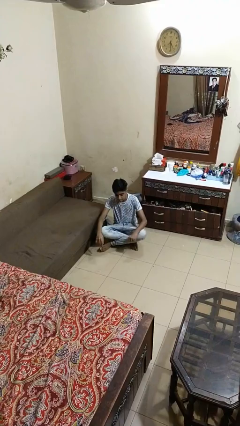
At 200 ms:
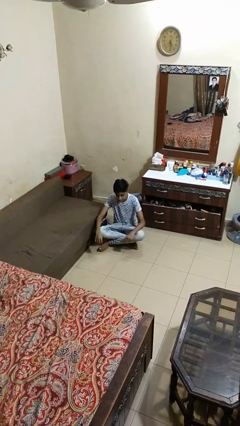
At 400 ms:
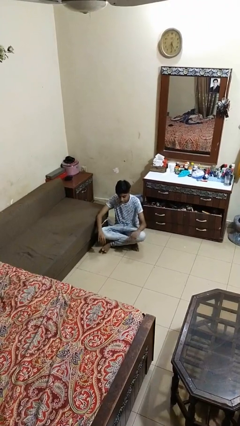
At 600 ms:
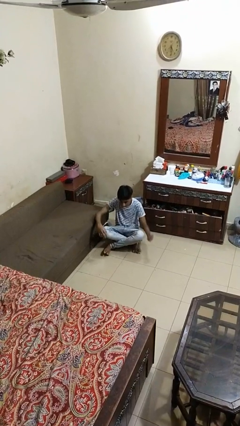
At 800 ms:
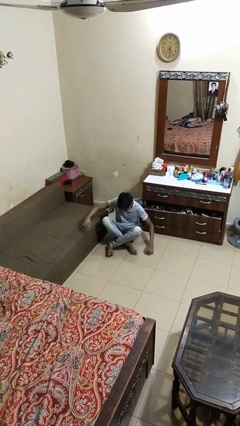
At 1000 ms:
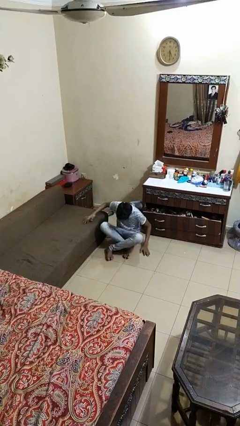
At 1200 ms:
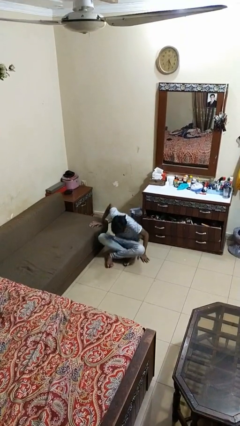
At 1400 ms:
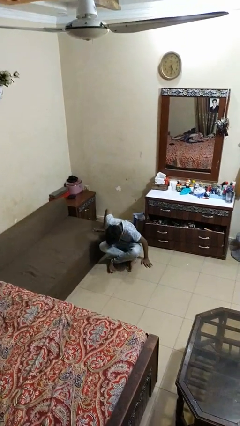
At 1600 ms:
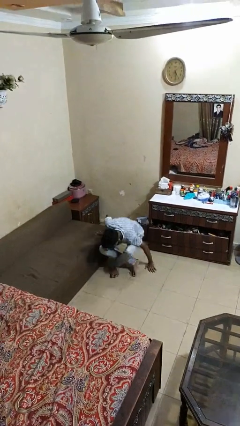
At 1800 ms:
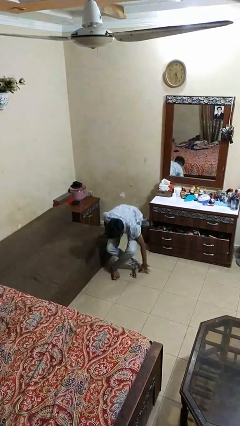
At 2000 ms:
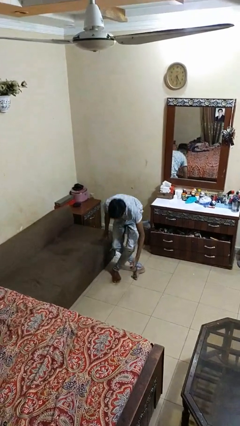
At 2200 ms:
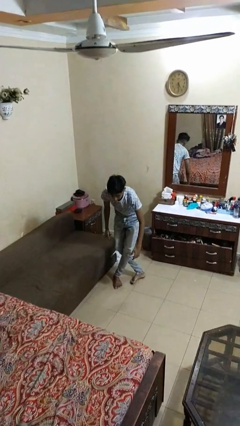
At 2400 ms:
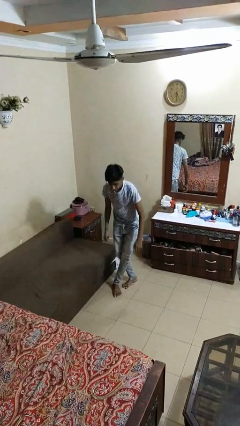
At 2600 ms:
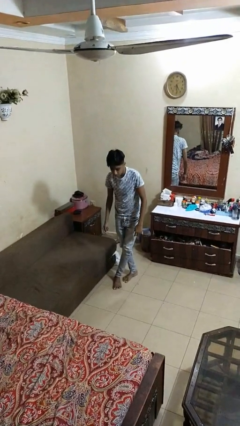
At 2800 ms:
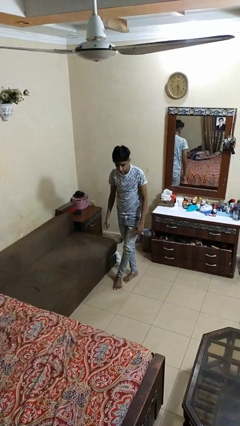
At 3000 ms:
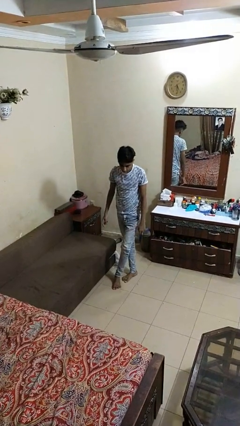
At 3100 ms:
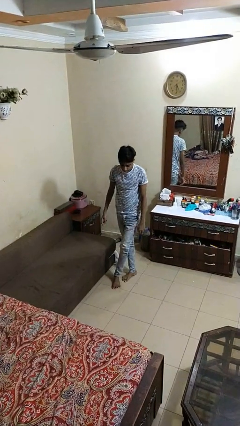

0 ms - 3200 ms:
person stands up from floor

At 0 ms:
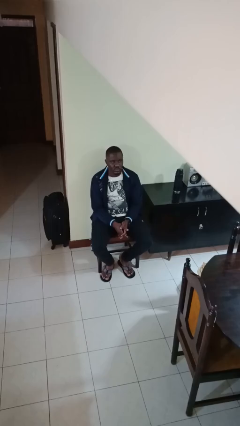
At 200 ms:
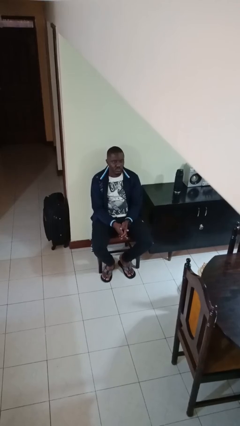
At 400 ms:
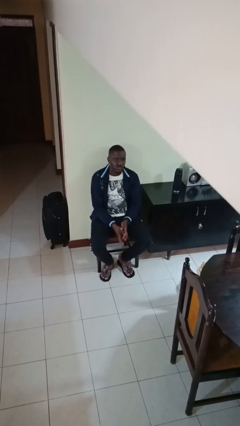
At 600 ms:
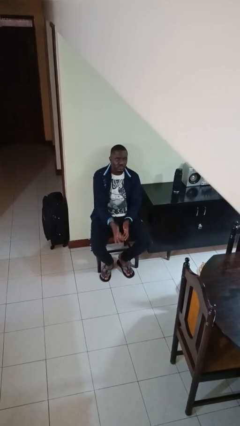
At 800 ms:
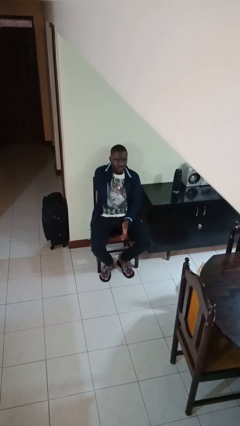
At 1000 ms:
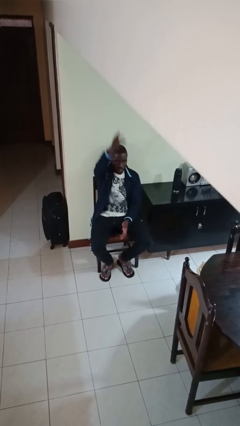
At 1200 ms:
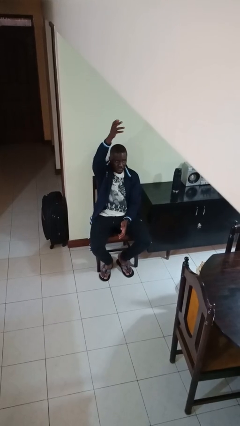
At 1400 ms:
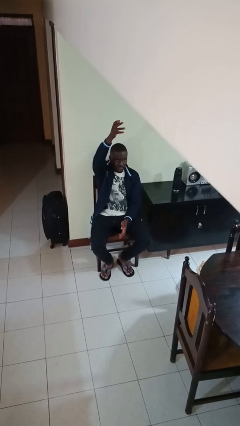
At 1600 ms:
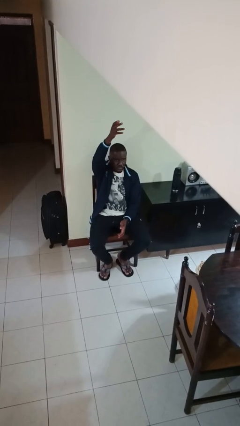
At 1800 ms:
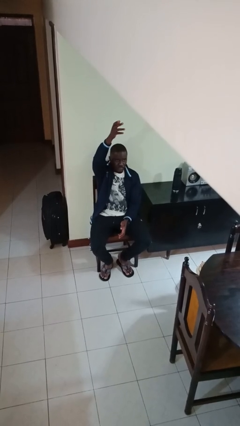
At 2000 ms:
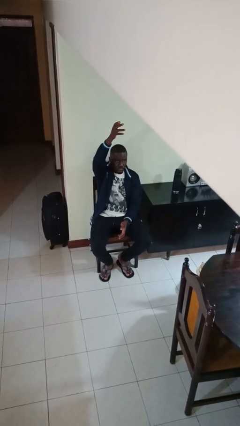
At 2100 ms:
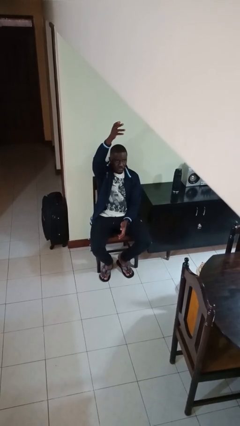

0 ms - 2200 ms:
person gestures swipe up

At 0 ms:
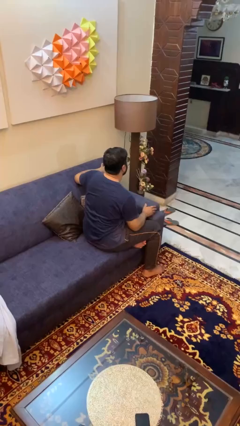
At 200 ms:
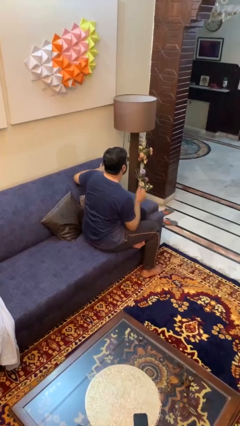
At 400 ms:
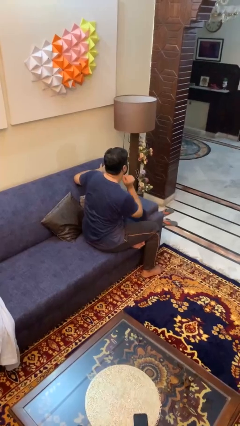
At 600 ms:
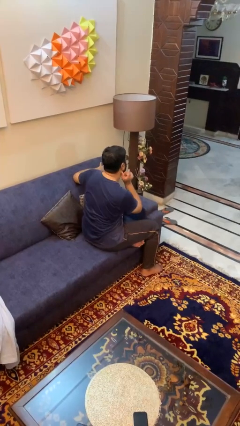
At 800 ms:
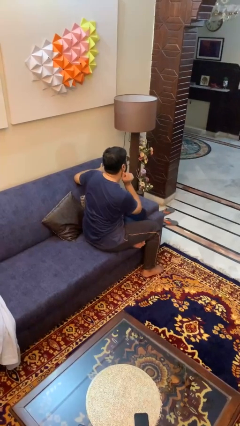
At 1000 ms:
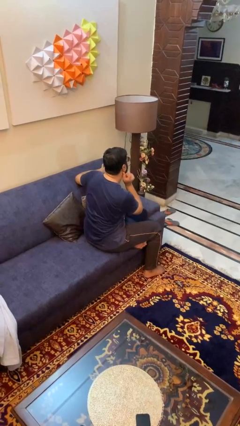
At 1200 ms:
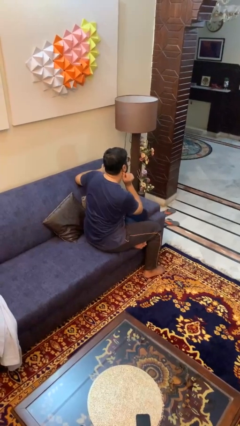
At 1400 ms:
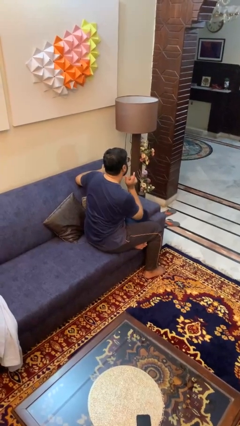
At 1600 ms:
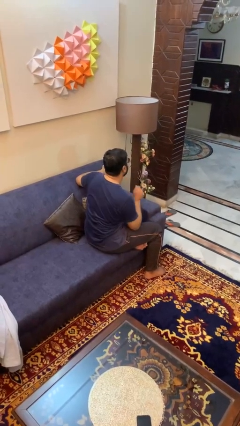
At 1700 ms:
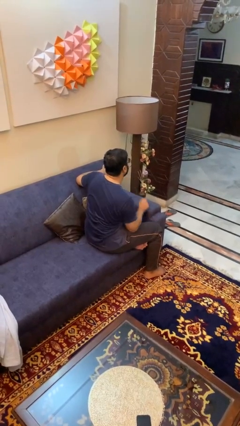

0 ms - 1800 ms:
person touches earlobe

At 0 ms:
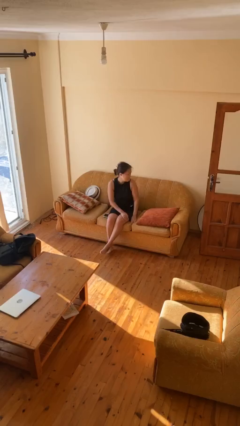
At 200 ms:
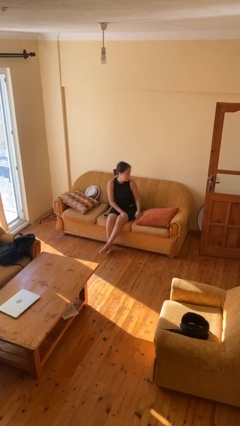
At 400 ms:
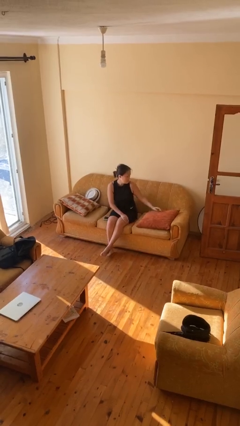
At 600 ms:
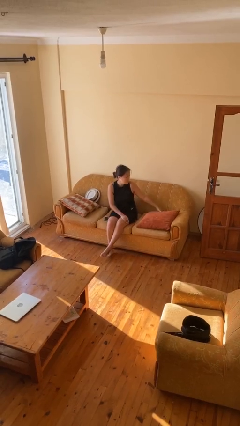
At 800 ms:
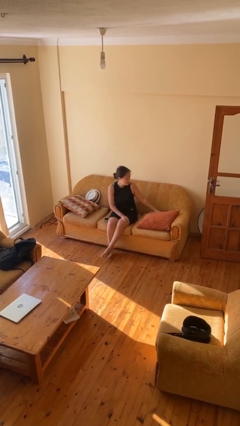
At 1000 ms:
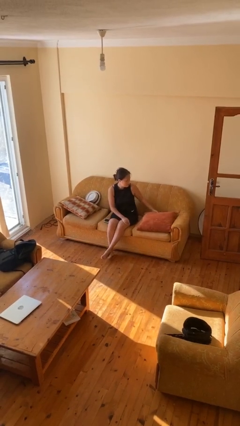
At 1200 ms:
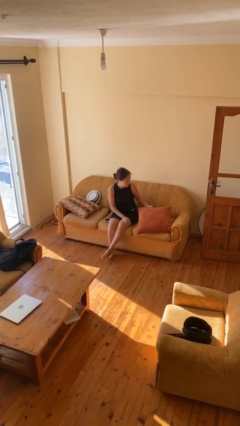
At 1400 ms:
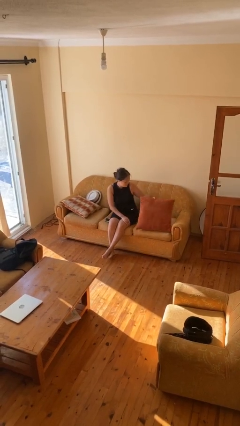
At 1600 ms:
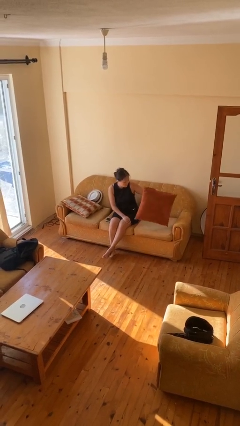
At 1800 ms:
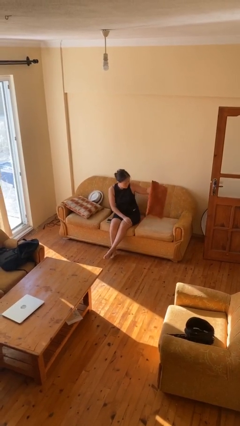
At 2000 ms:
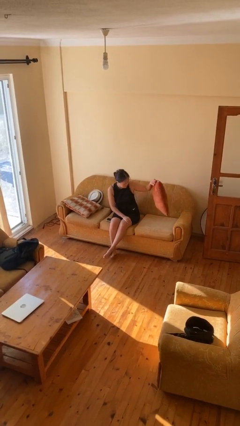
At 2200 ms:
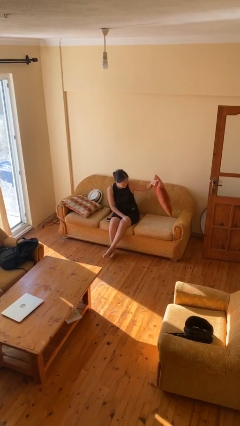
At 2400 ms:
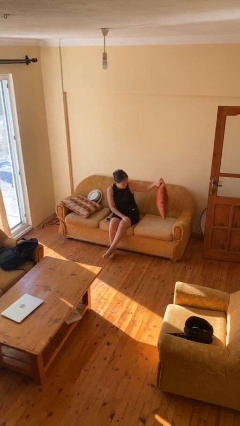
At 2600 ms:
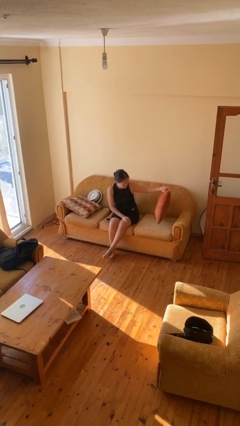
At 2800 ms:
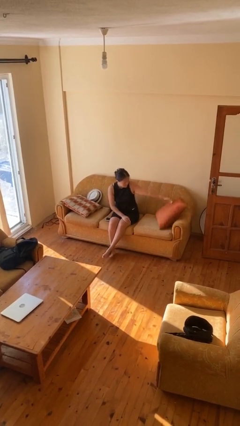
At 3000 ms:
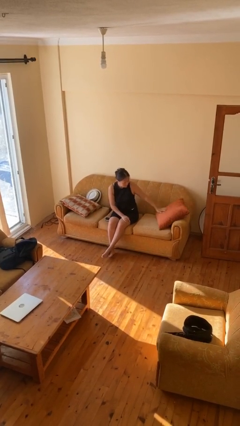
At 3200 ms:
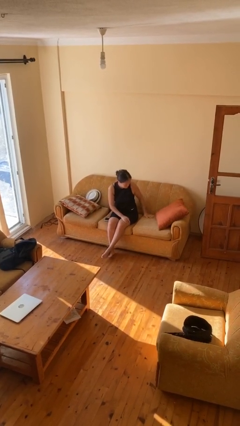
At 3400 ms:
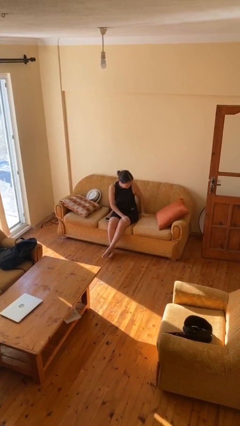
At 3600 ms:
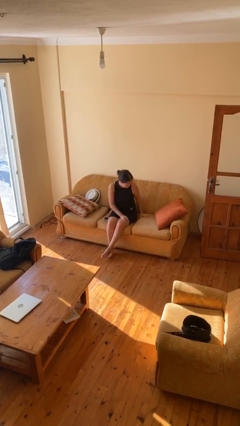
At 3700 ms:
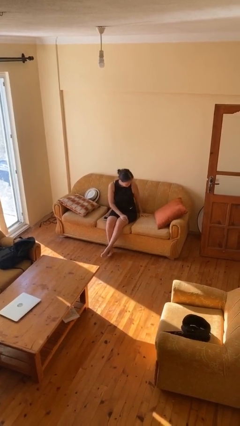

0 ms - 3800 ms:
person searches in couch

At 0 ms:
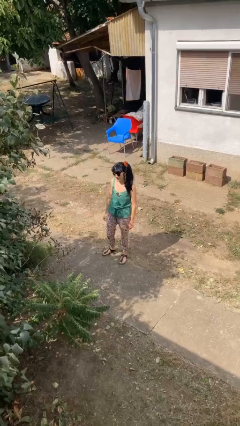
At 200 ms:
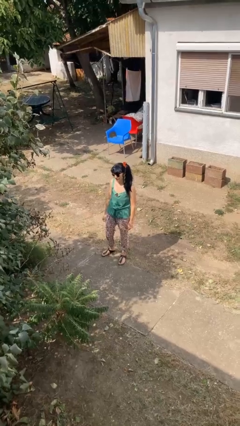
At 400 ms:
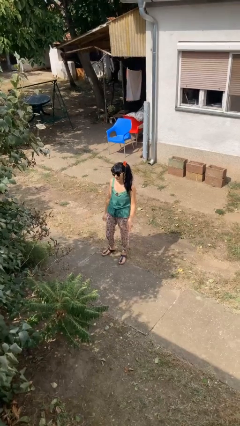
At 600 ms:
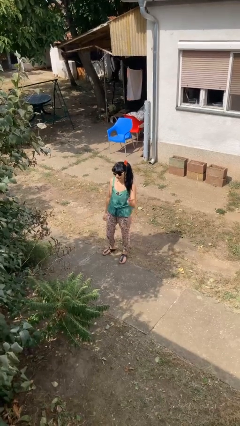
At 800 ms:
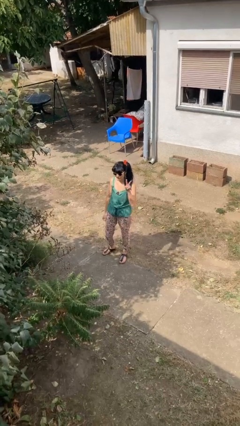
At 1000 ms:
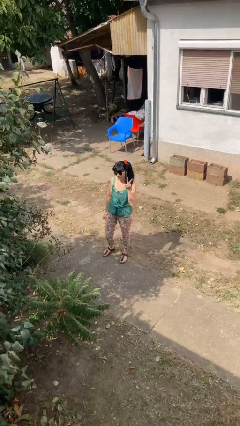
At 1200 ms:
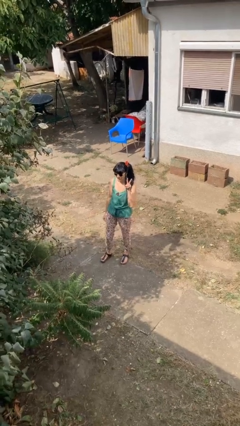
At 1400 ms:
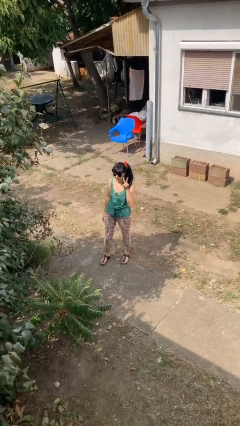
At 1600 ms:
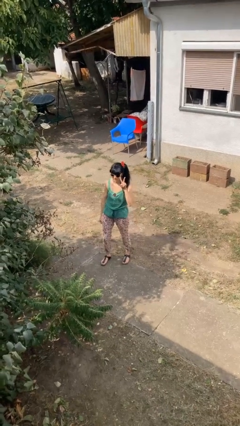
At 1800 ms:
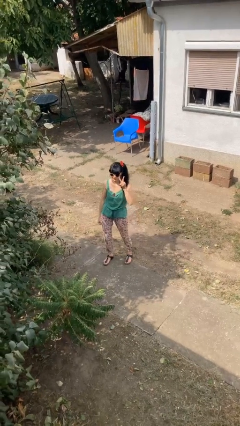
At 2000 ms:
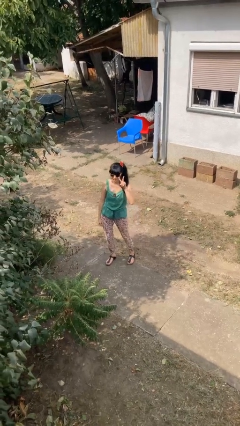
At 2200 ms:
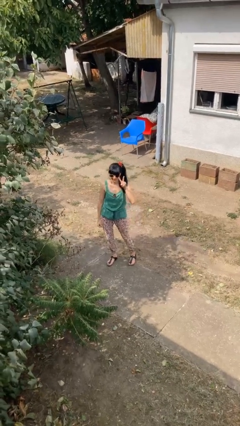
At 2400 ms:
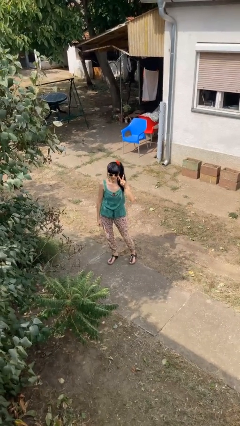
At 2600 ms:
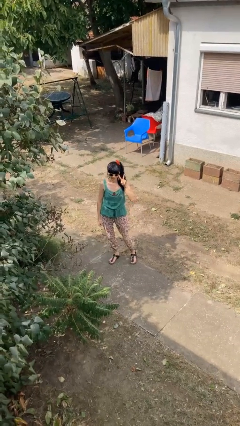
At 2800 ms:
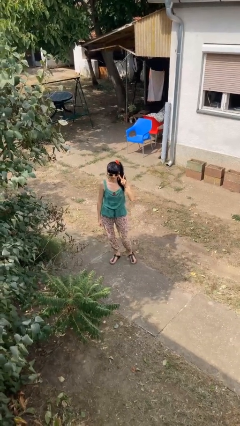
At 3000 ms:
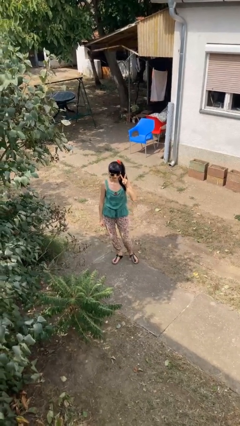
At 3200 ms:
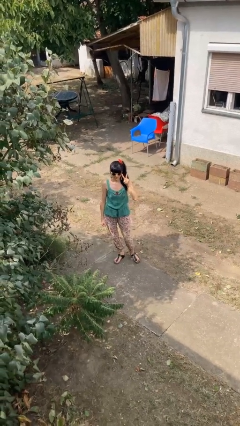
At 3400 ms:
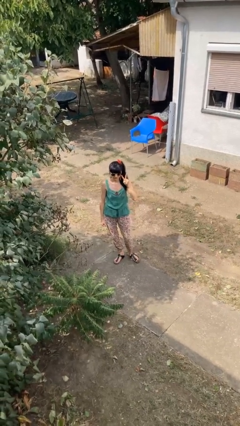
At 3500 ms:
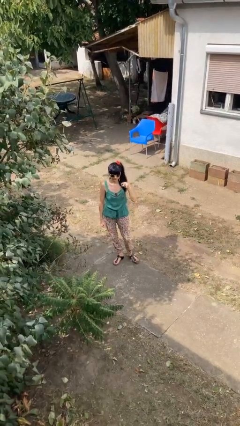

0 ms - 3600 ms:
person gestures peace

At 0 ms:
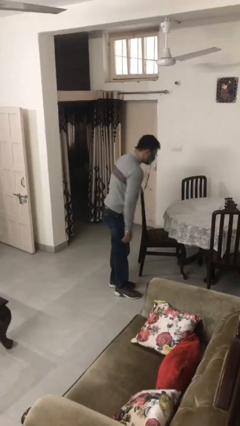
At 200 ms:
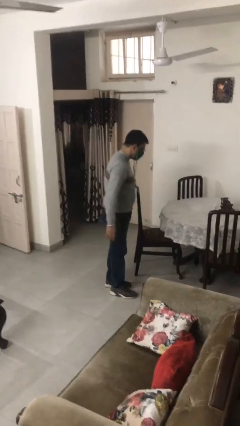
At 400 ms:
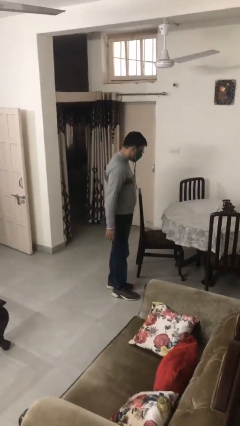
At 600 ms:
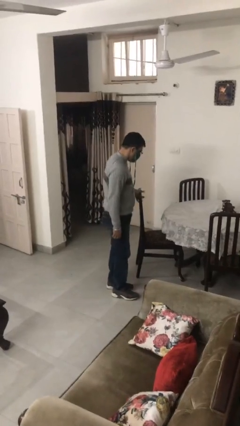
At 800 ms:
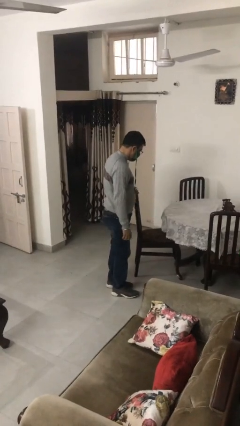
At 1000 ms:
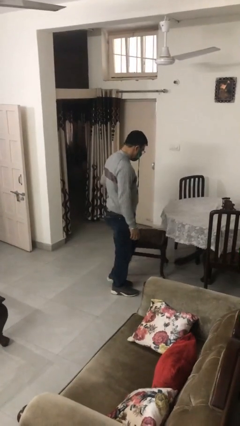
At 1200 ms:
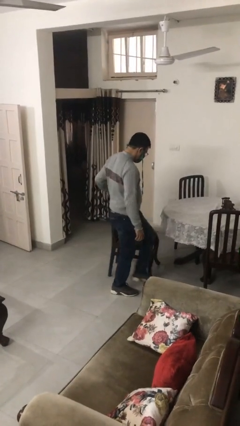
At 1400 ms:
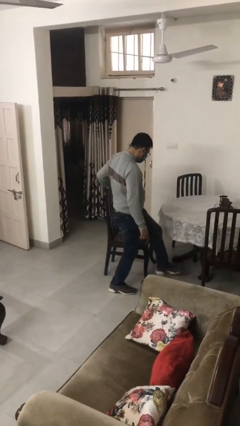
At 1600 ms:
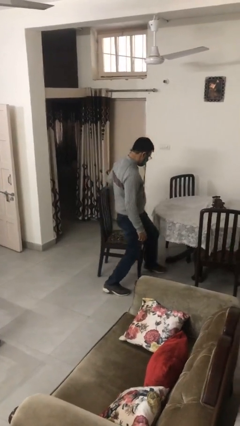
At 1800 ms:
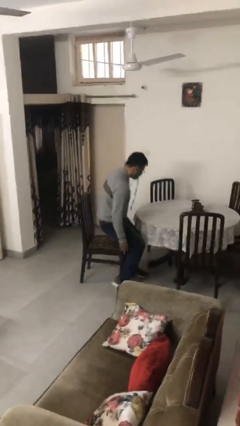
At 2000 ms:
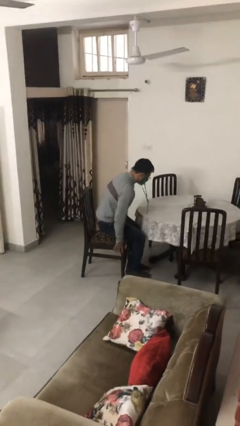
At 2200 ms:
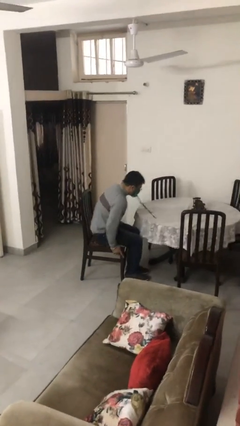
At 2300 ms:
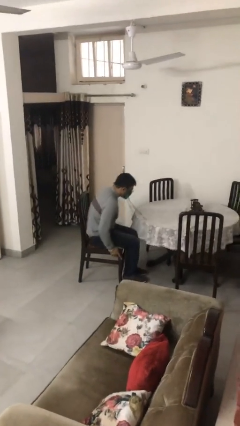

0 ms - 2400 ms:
person sits down

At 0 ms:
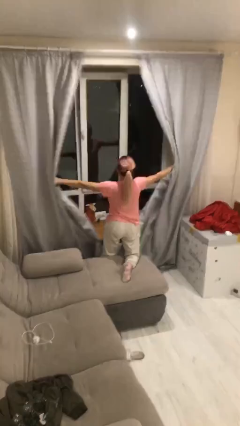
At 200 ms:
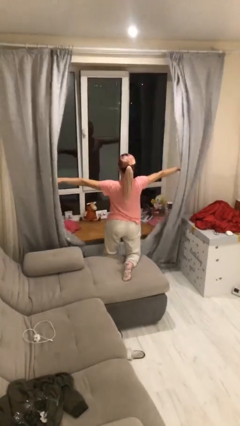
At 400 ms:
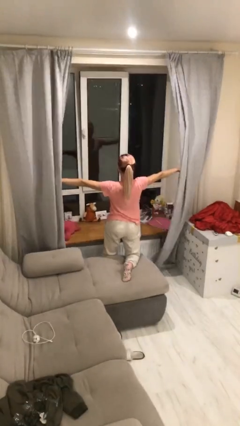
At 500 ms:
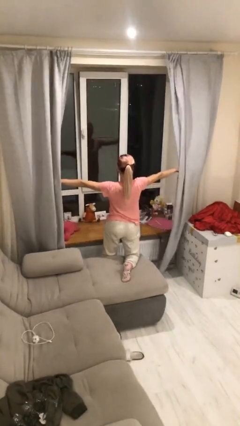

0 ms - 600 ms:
person opens curtains
